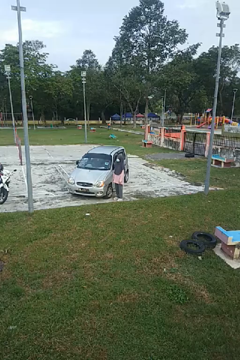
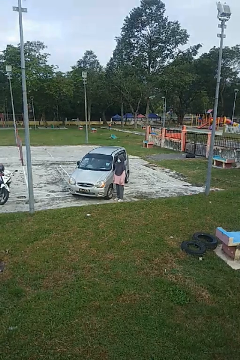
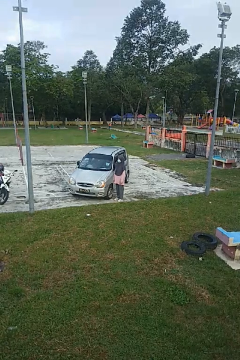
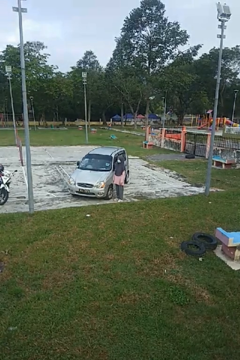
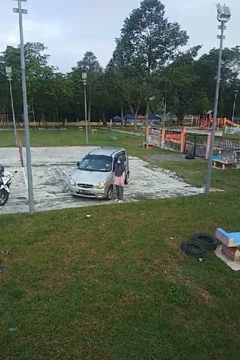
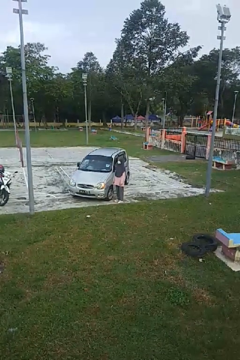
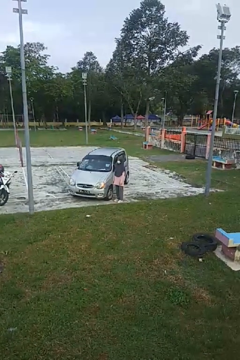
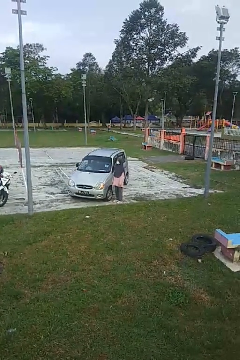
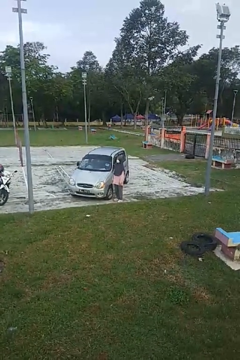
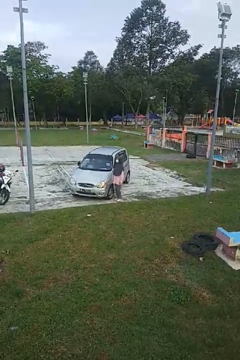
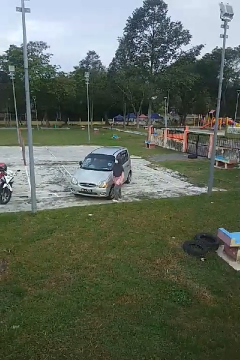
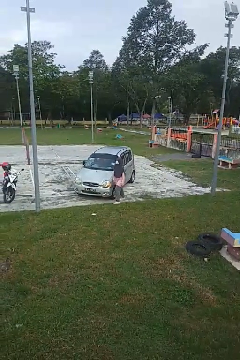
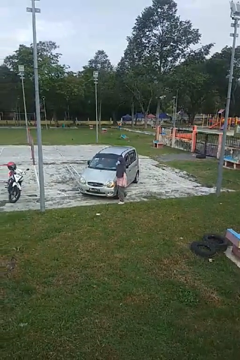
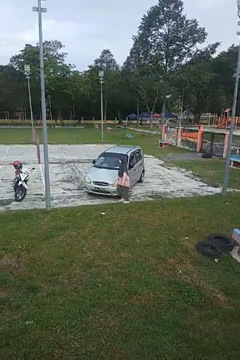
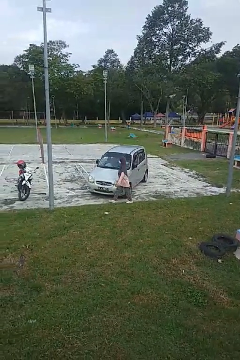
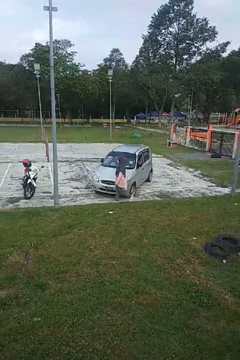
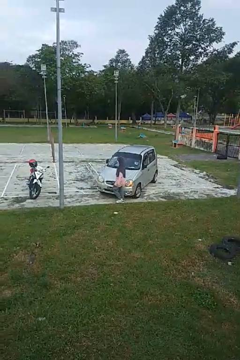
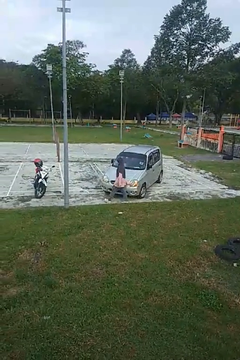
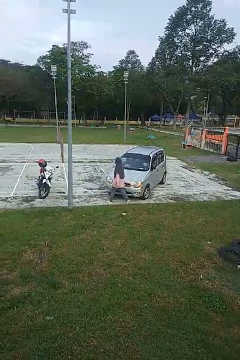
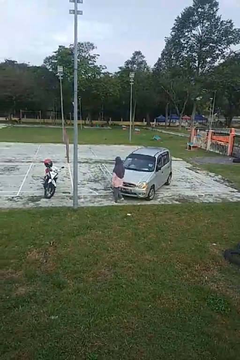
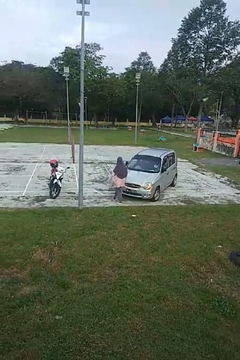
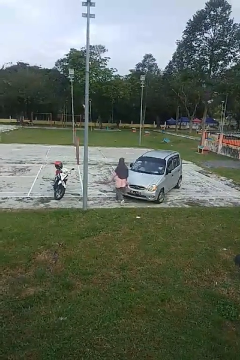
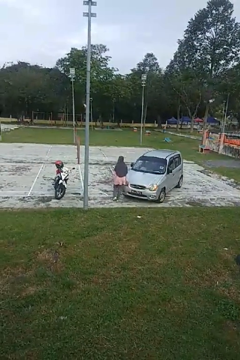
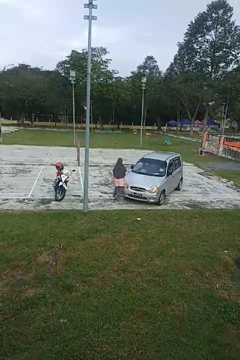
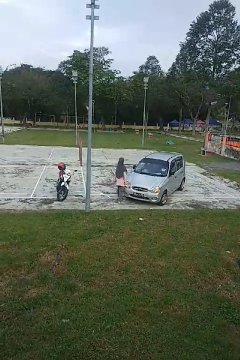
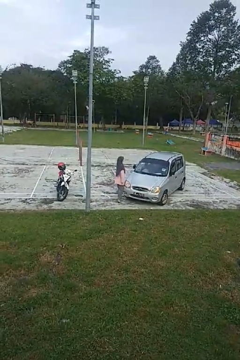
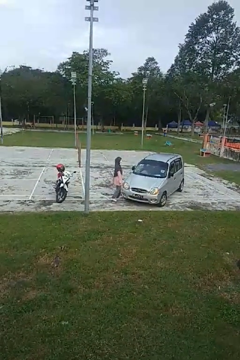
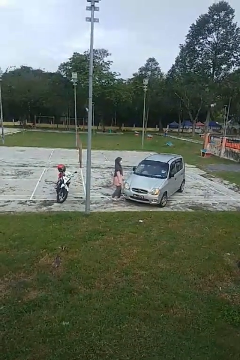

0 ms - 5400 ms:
person walks around car

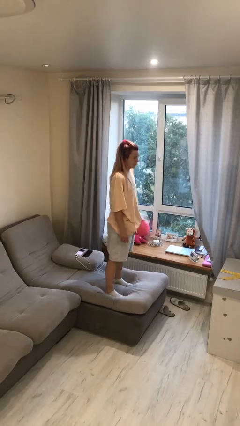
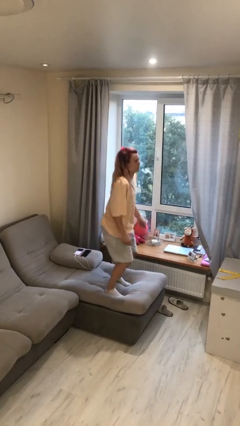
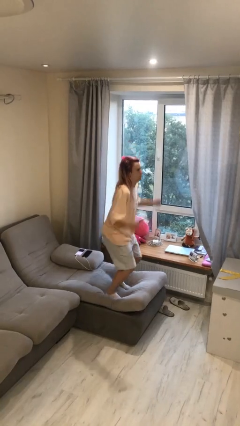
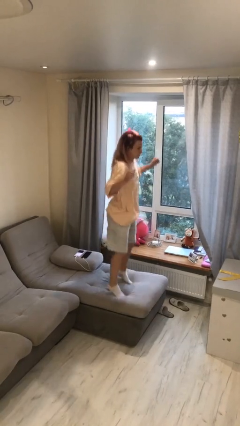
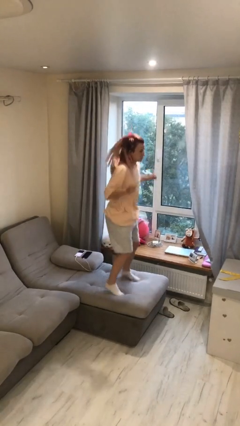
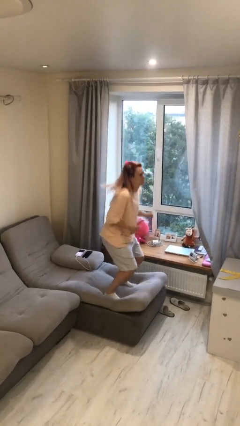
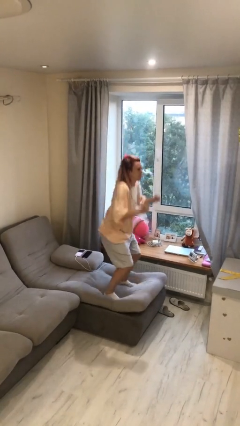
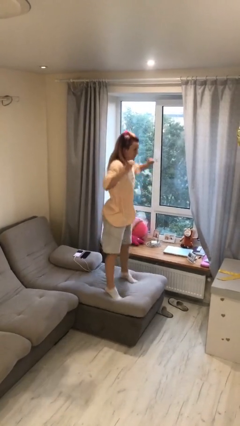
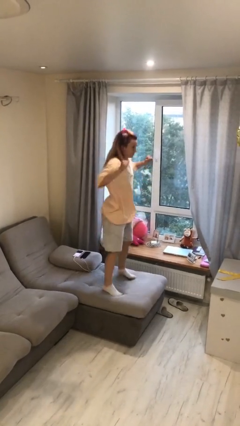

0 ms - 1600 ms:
person jumps on couch

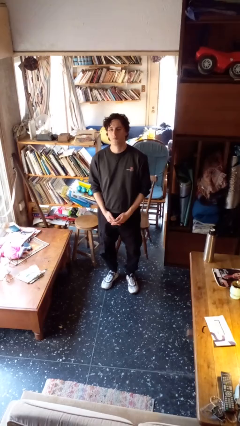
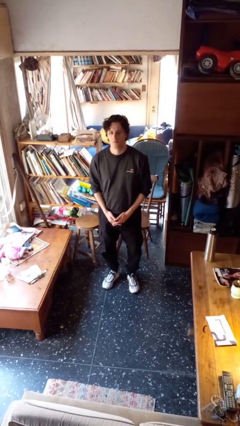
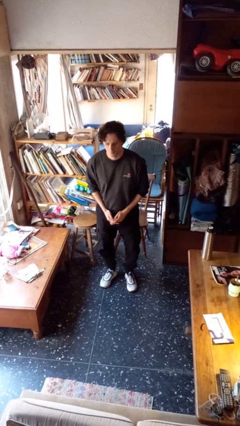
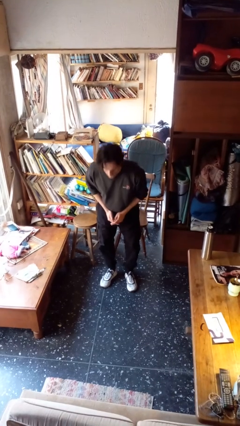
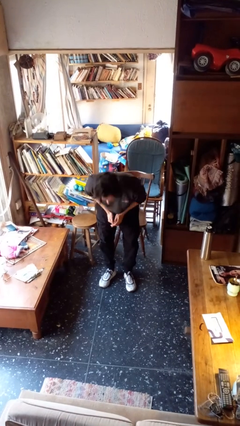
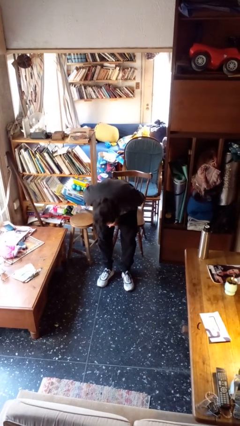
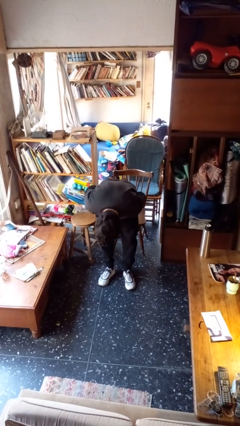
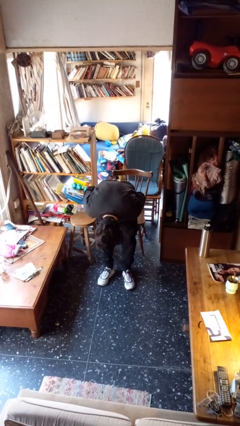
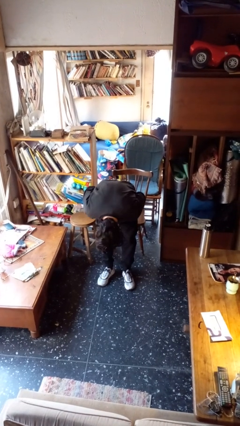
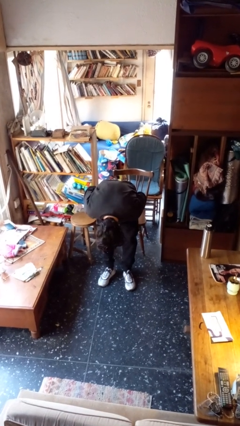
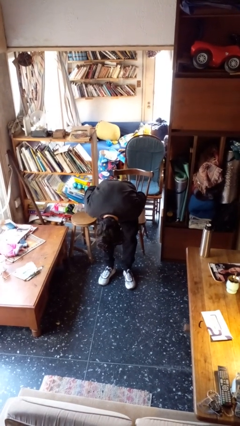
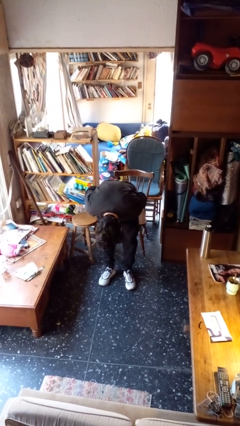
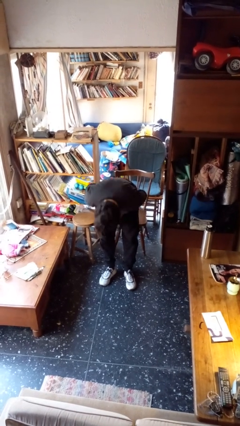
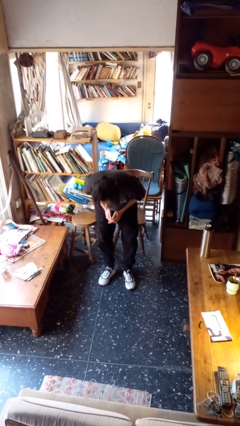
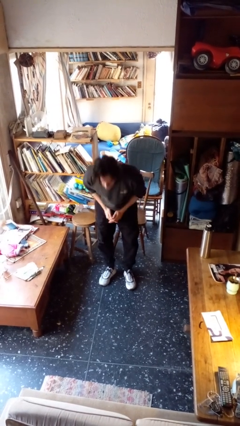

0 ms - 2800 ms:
person bows

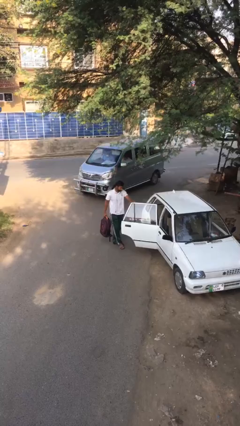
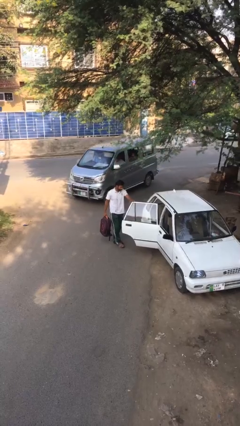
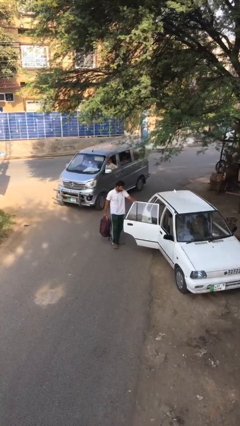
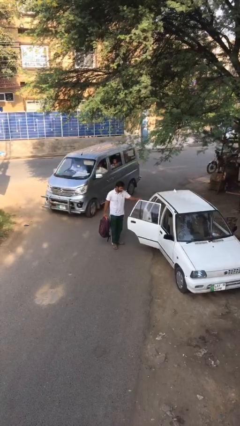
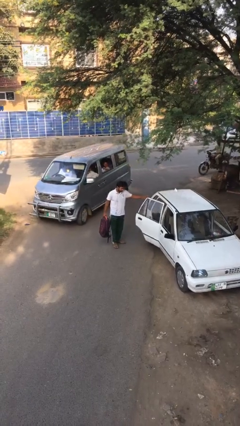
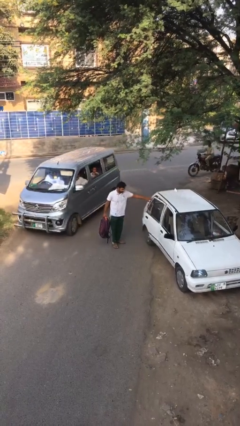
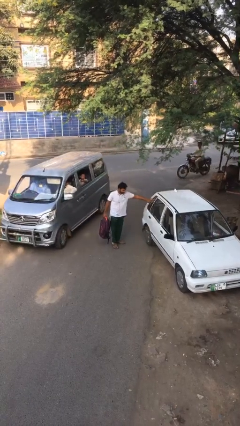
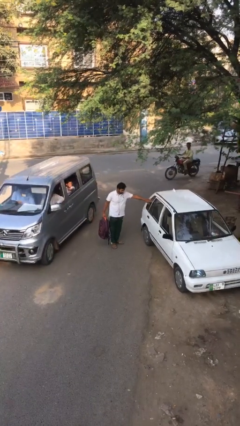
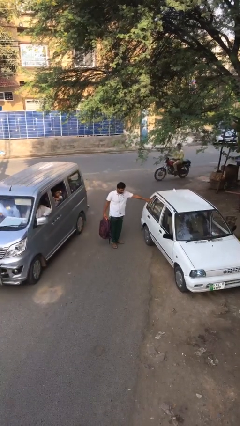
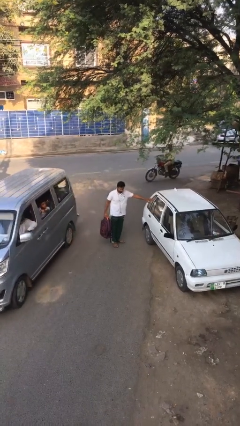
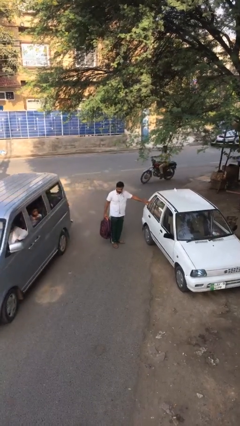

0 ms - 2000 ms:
person closes car door

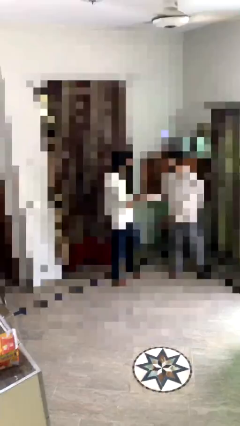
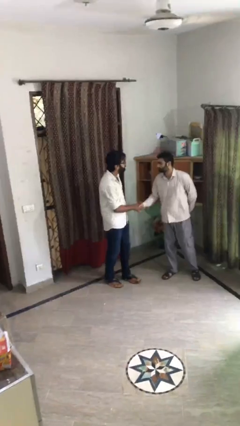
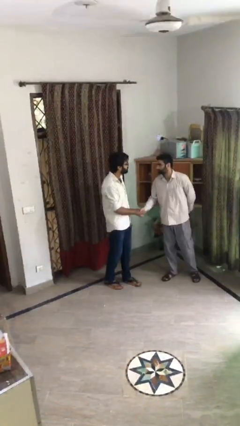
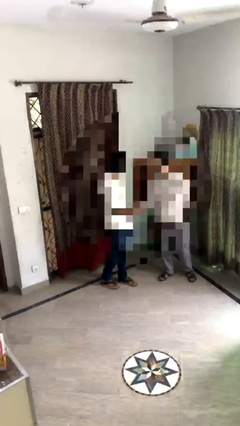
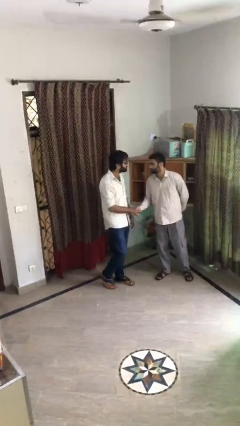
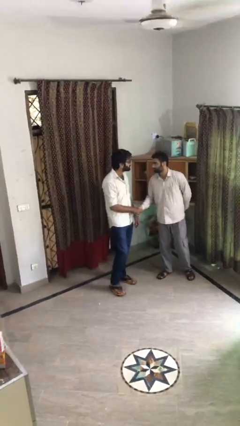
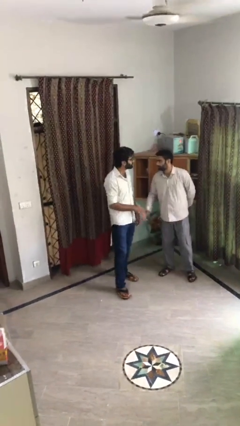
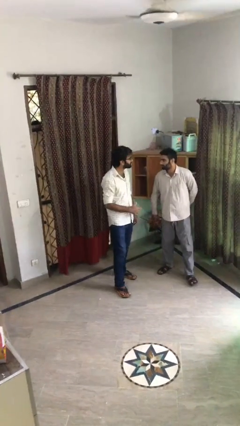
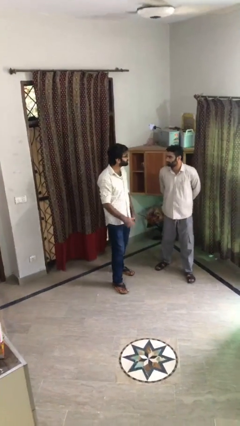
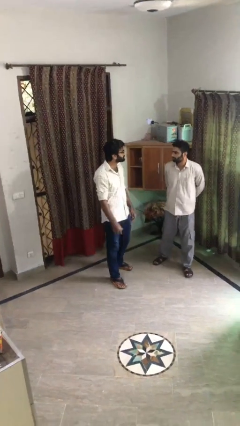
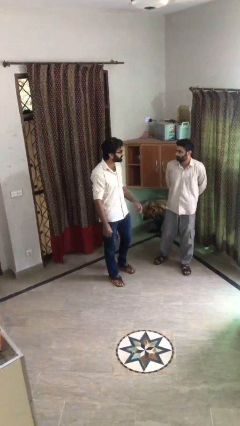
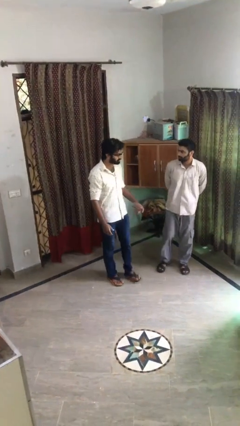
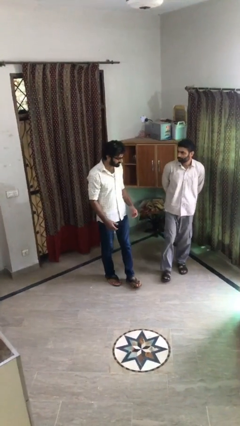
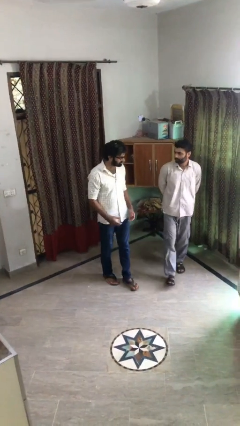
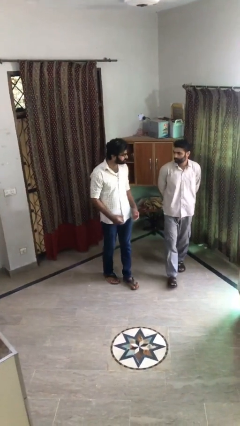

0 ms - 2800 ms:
person shakes hand

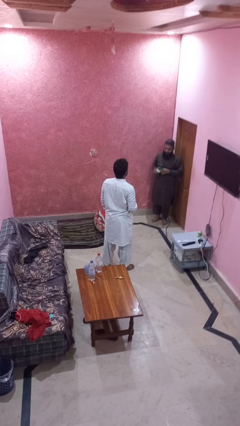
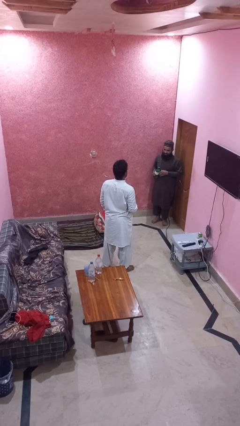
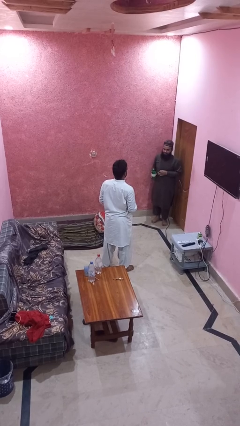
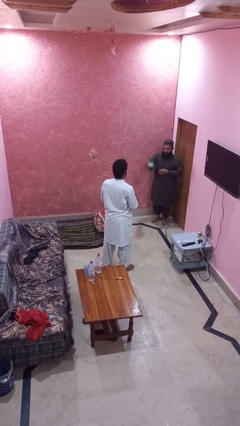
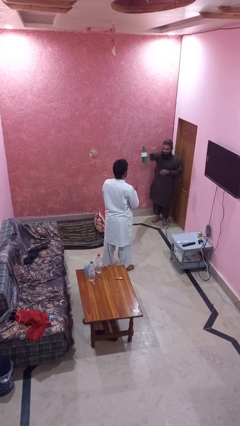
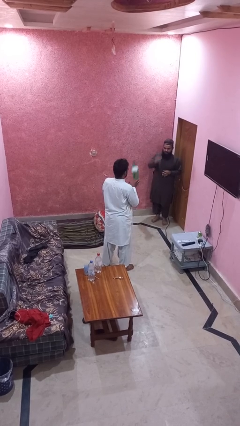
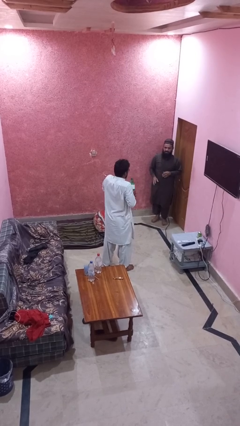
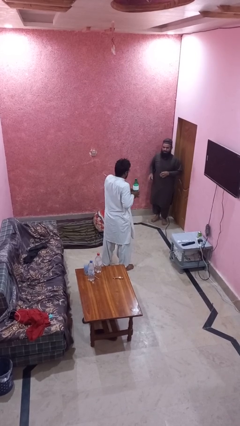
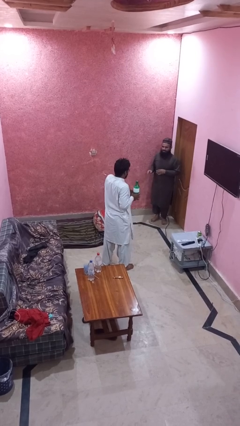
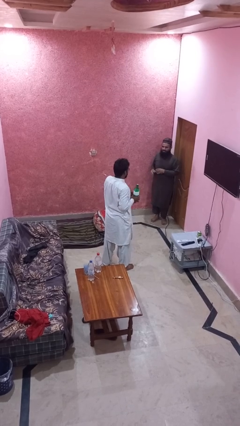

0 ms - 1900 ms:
person catches object from person

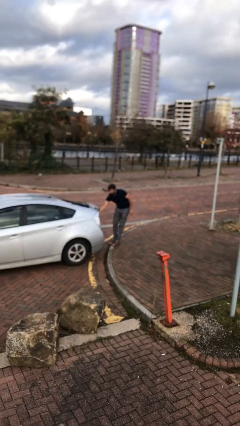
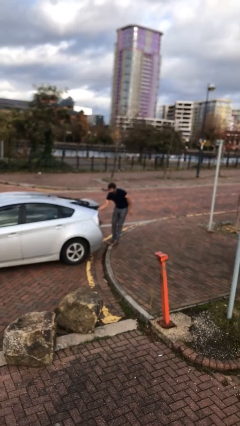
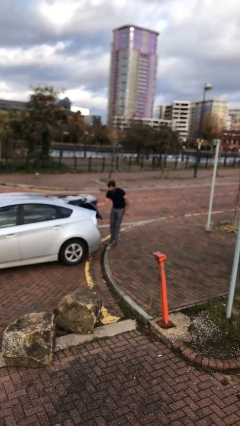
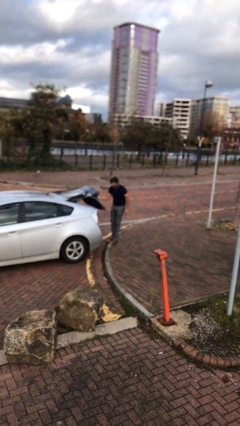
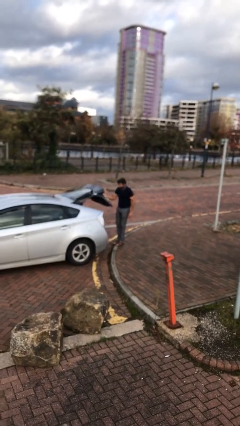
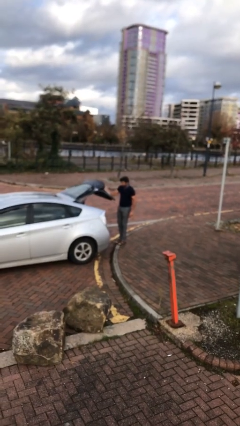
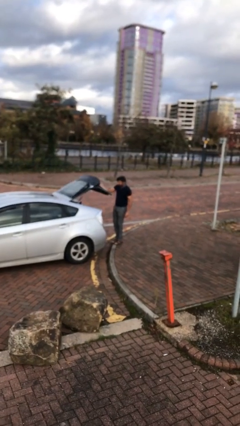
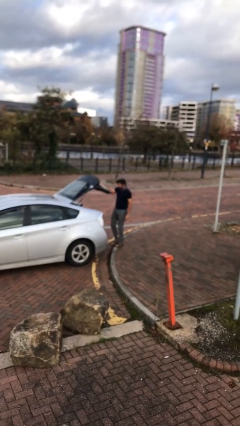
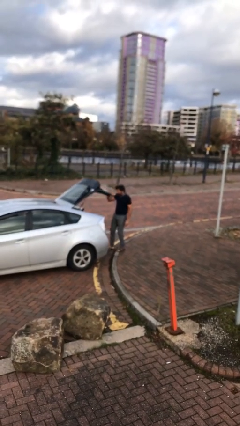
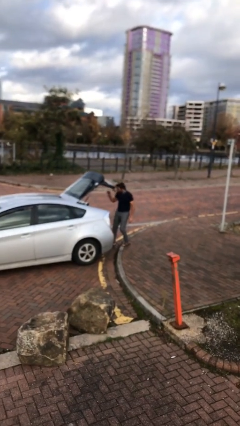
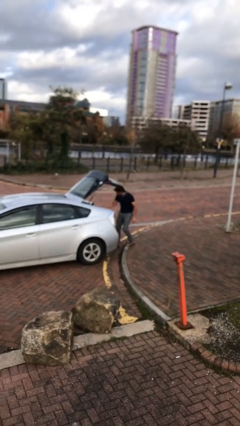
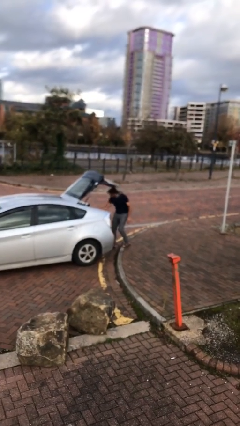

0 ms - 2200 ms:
person opens car trunk
